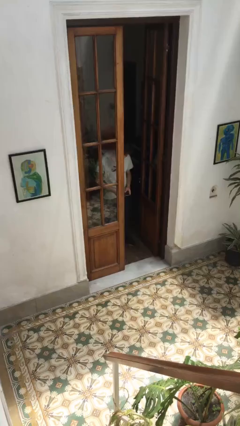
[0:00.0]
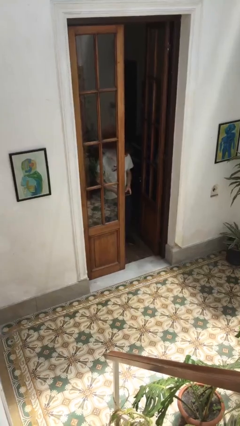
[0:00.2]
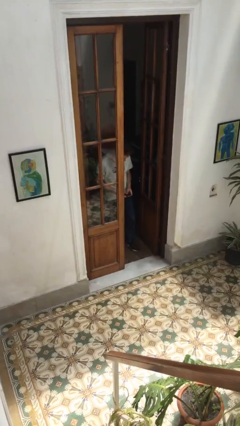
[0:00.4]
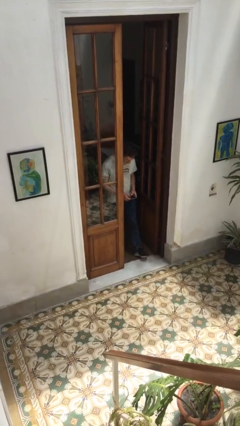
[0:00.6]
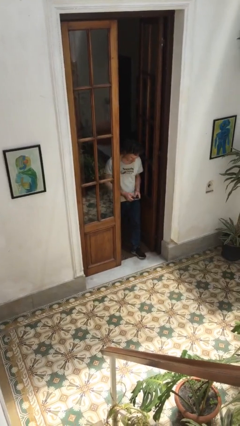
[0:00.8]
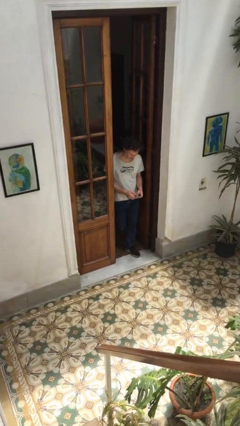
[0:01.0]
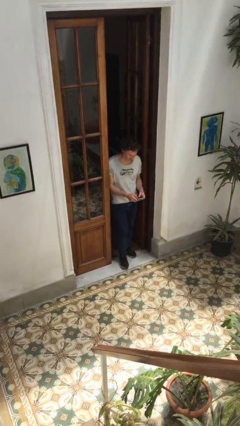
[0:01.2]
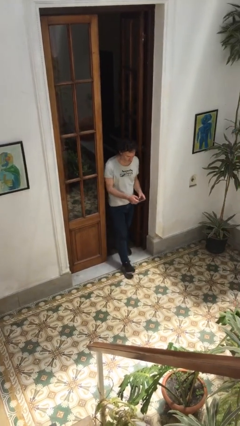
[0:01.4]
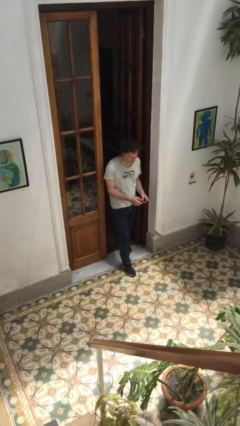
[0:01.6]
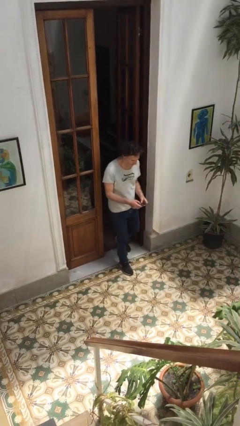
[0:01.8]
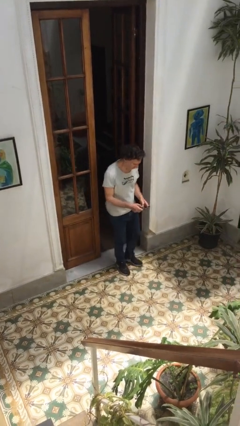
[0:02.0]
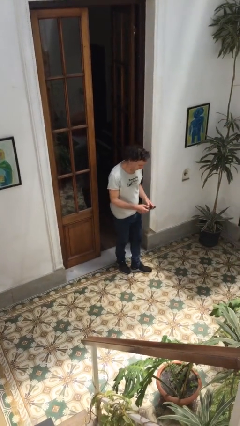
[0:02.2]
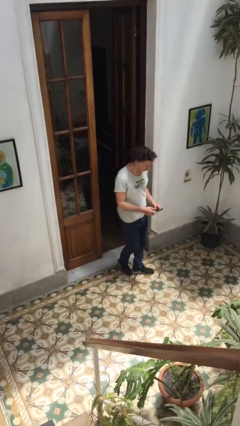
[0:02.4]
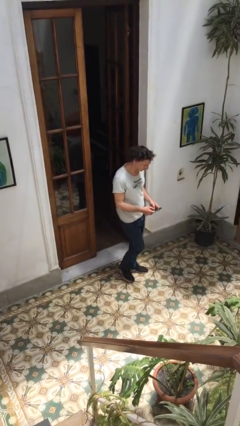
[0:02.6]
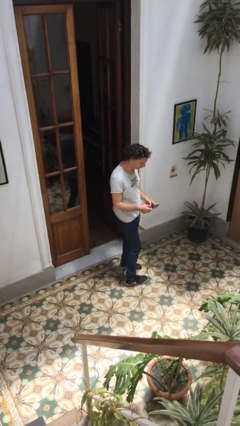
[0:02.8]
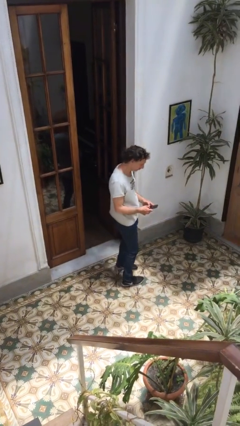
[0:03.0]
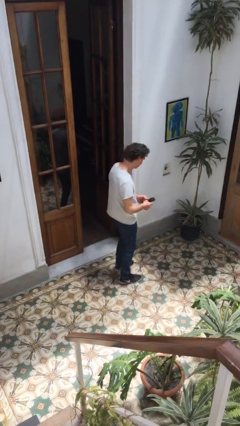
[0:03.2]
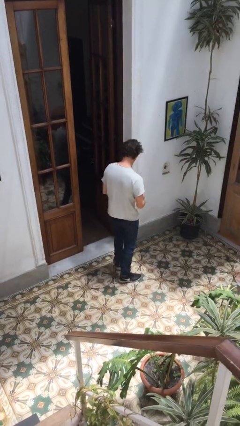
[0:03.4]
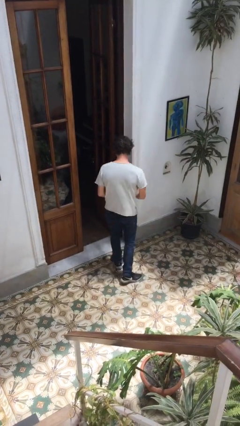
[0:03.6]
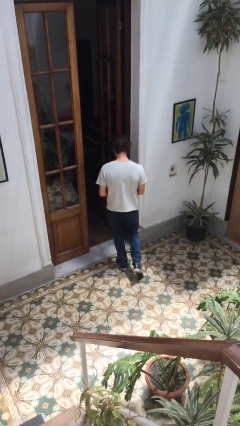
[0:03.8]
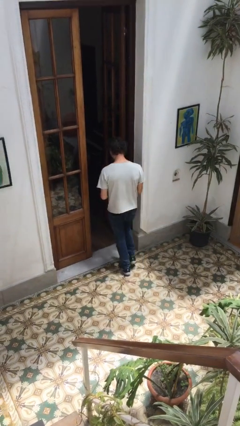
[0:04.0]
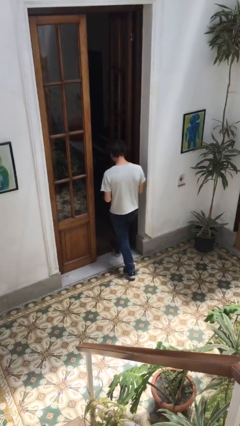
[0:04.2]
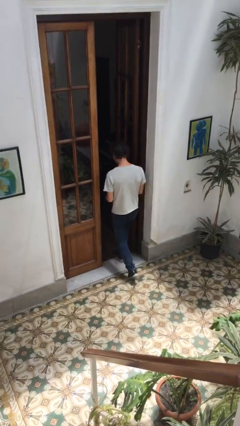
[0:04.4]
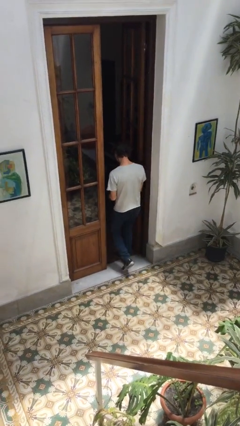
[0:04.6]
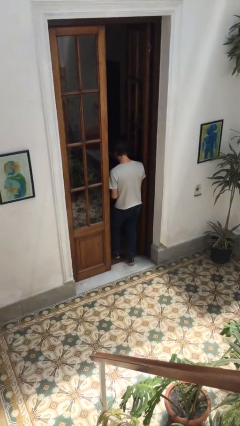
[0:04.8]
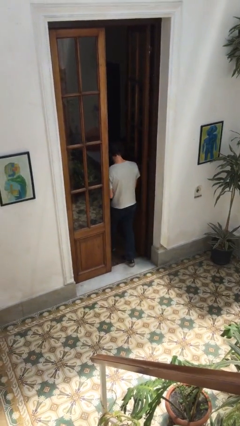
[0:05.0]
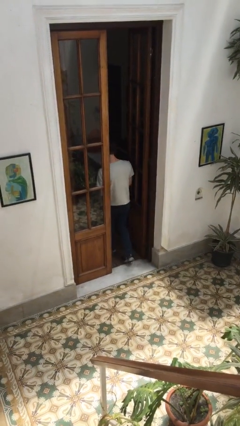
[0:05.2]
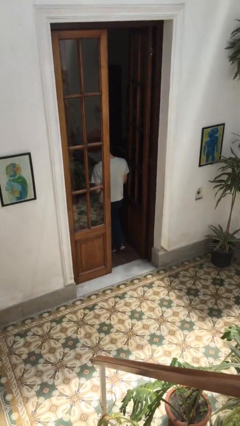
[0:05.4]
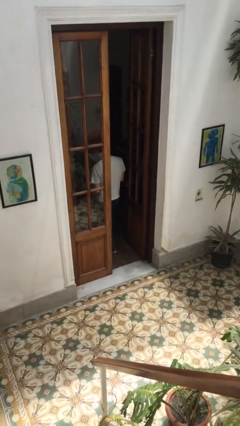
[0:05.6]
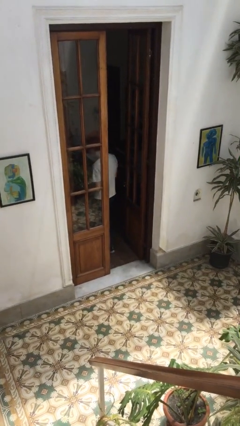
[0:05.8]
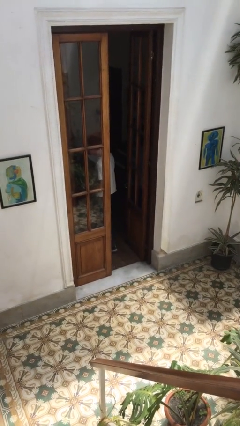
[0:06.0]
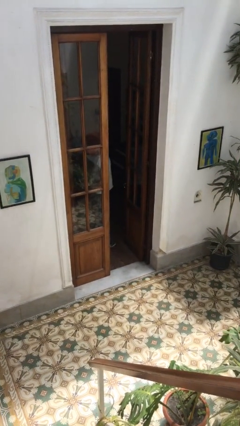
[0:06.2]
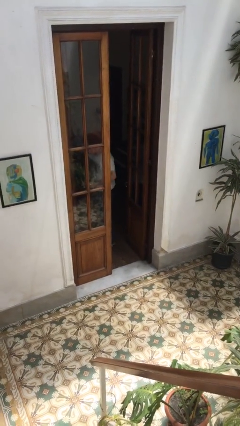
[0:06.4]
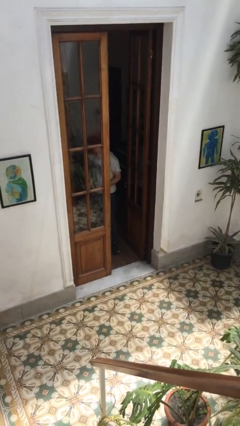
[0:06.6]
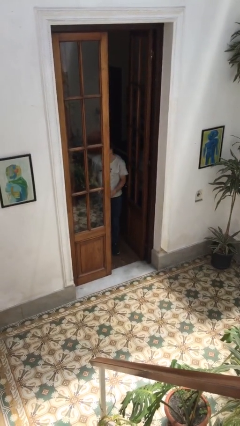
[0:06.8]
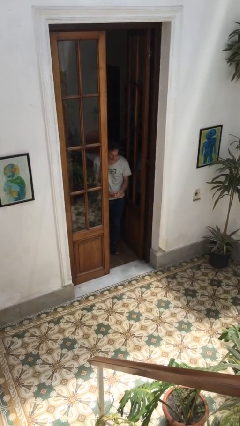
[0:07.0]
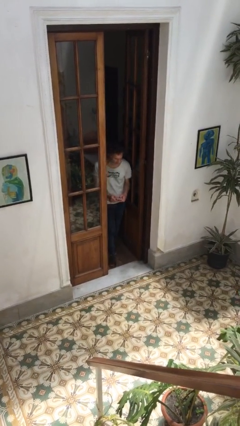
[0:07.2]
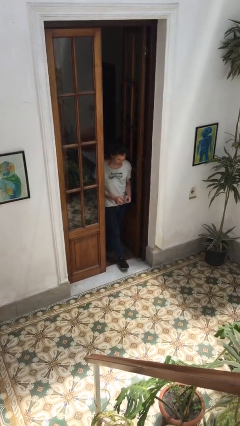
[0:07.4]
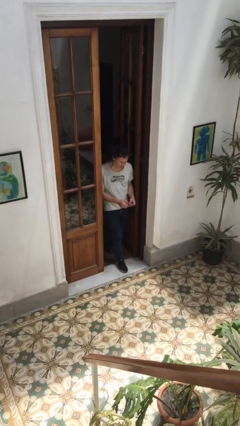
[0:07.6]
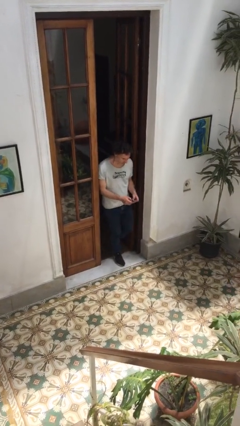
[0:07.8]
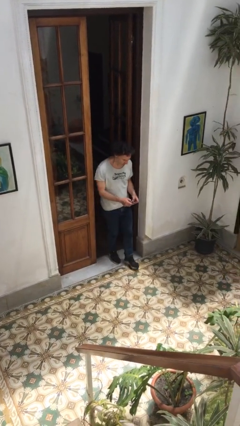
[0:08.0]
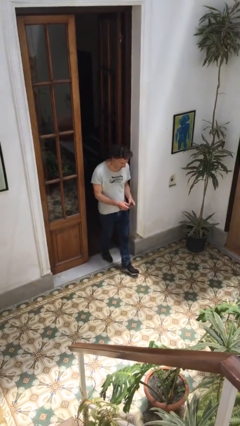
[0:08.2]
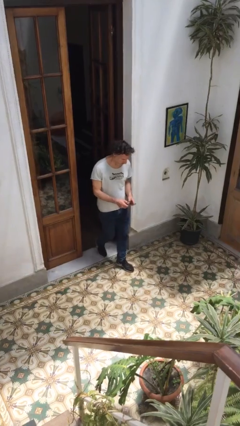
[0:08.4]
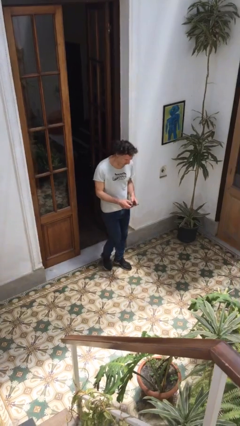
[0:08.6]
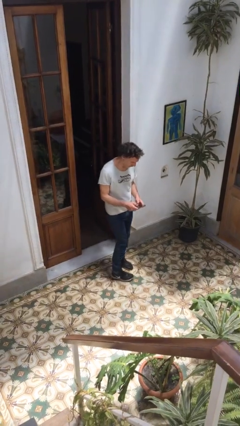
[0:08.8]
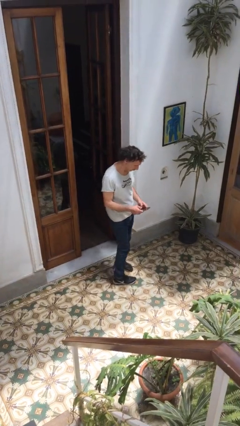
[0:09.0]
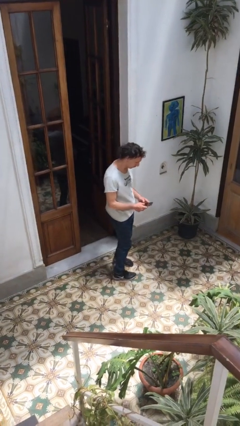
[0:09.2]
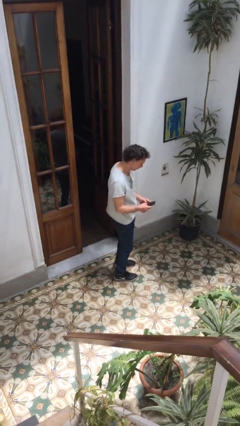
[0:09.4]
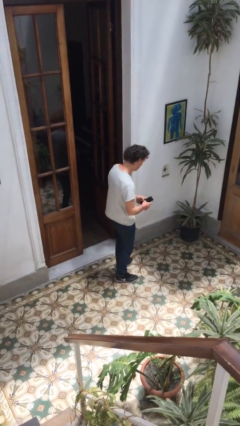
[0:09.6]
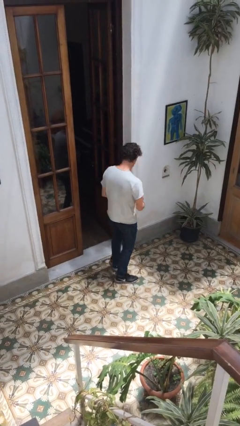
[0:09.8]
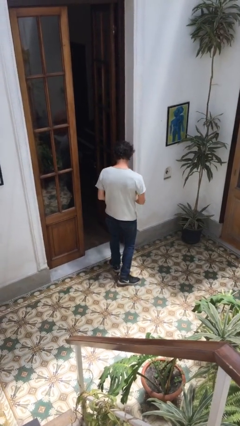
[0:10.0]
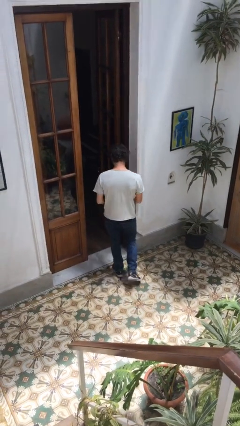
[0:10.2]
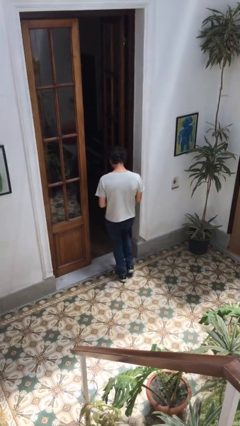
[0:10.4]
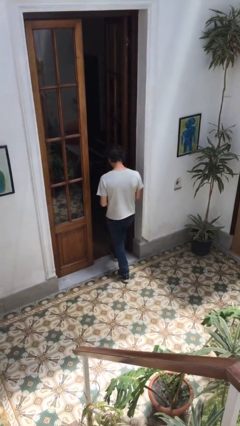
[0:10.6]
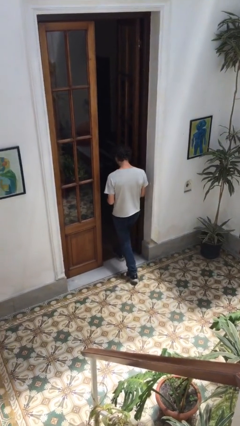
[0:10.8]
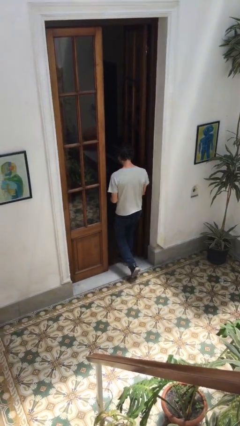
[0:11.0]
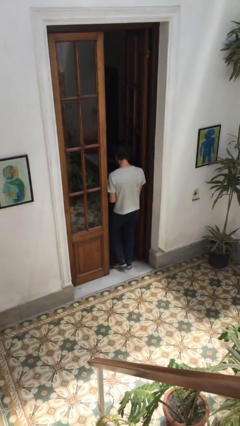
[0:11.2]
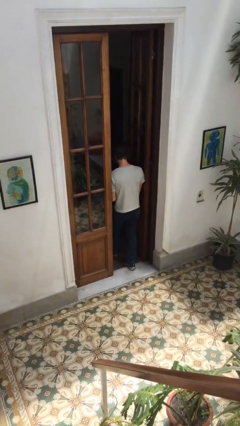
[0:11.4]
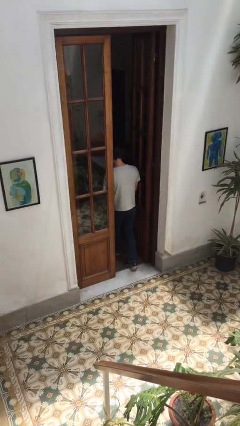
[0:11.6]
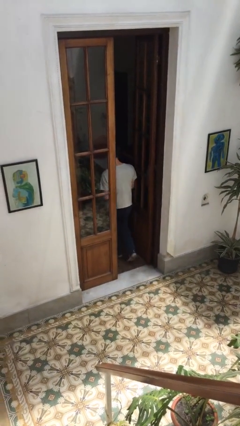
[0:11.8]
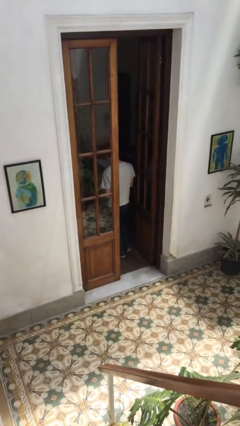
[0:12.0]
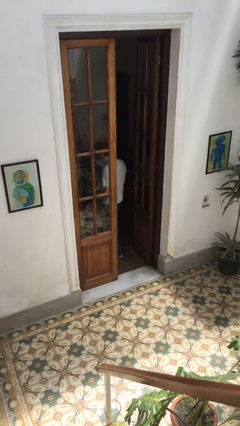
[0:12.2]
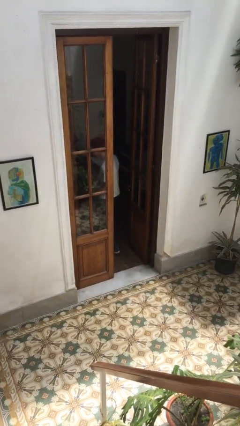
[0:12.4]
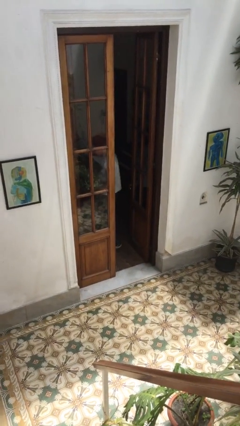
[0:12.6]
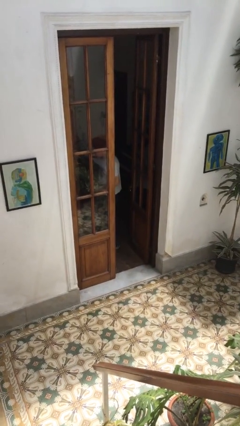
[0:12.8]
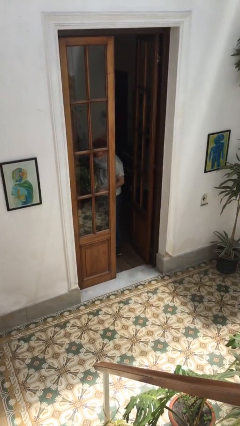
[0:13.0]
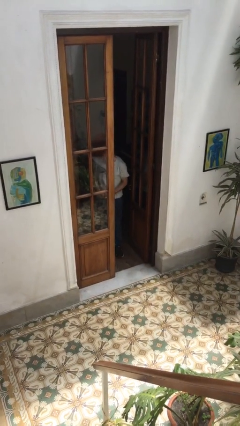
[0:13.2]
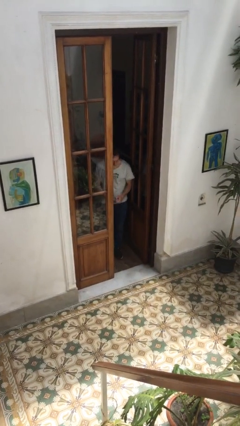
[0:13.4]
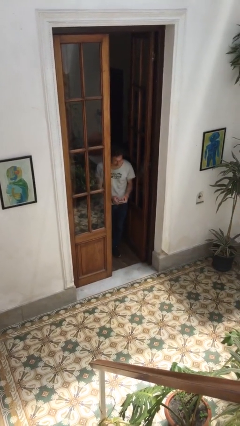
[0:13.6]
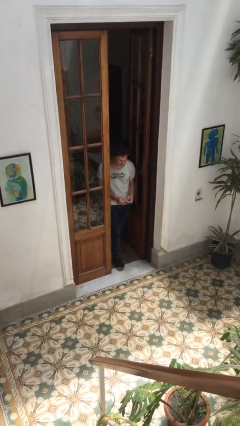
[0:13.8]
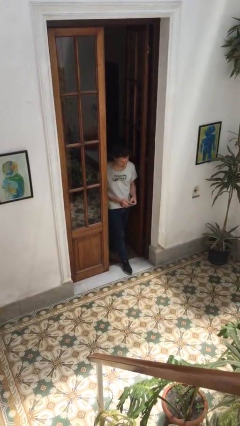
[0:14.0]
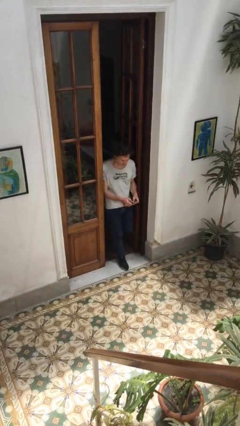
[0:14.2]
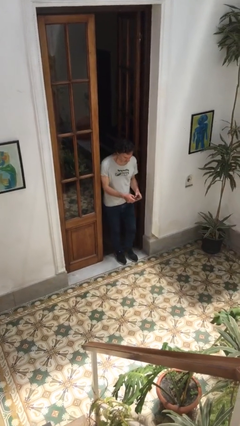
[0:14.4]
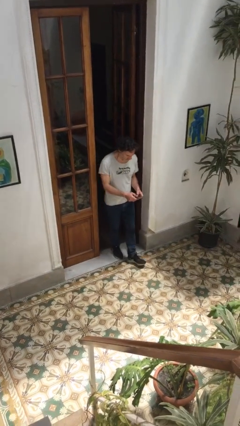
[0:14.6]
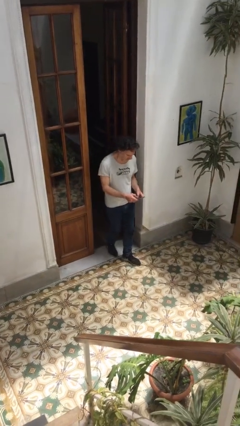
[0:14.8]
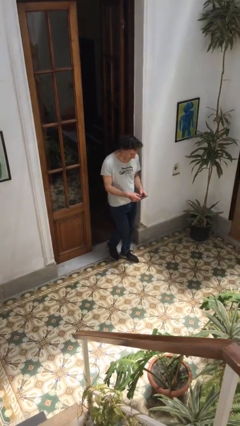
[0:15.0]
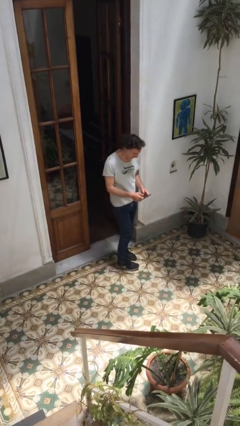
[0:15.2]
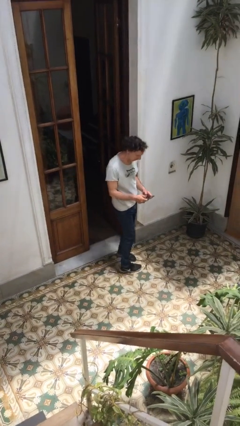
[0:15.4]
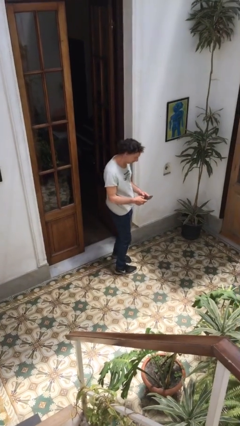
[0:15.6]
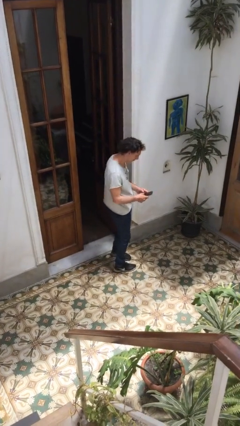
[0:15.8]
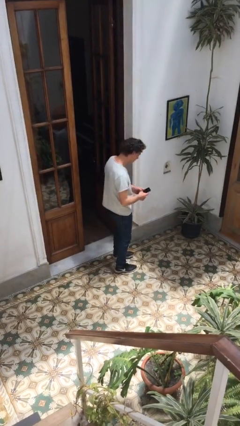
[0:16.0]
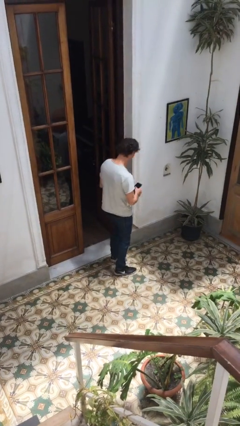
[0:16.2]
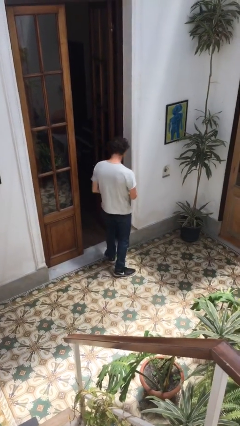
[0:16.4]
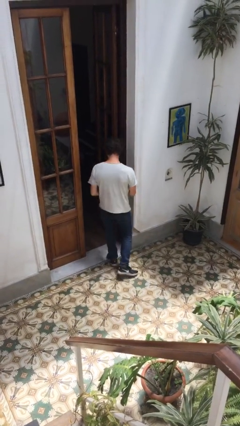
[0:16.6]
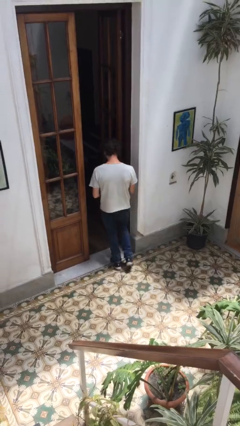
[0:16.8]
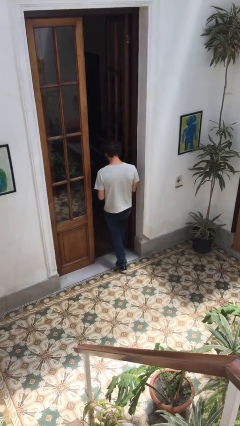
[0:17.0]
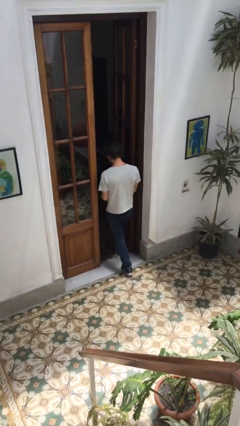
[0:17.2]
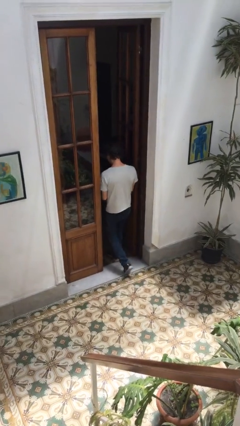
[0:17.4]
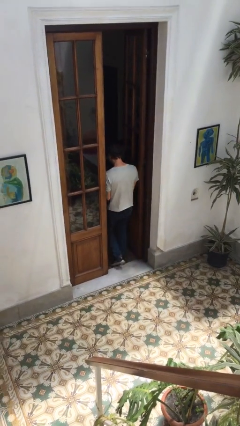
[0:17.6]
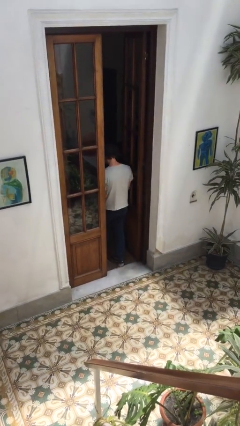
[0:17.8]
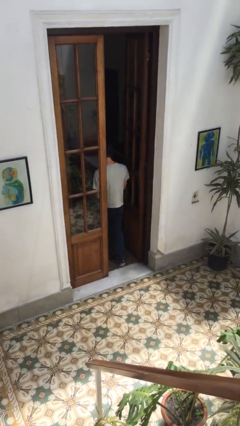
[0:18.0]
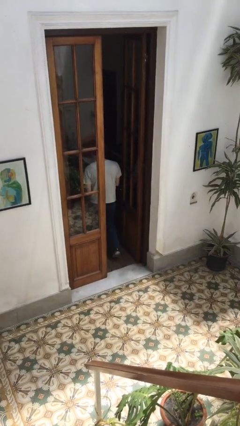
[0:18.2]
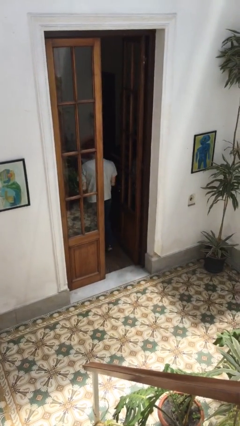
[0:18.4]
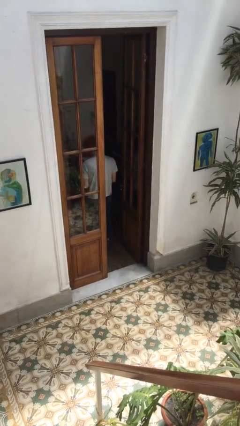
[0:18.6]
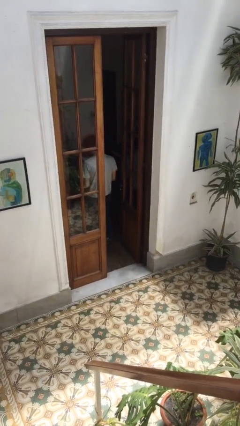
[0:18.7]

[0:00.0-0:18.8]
person texts on phone
